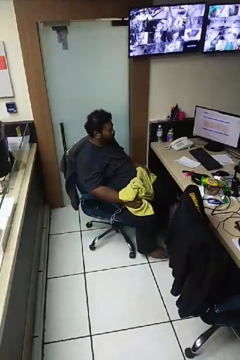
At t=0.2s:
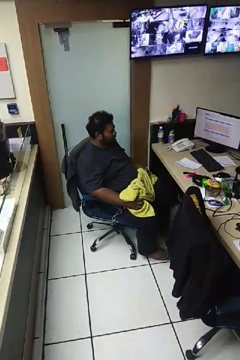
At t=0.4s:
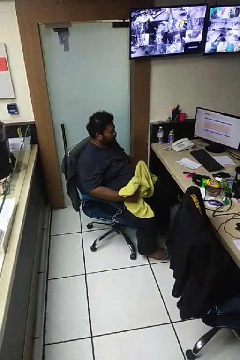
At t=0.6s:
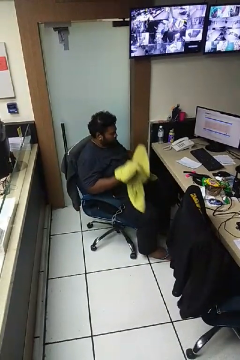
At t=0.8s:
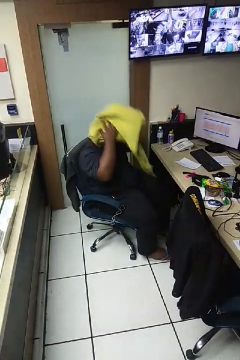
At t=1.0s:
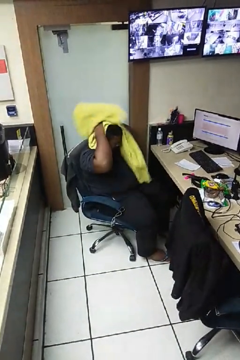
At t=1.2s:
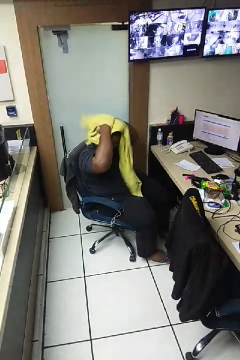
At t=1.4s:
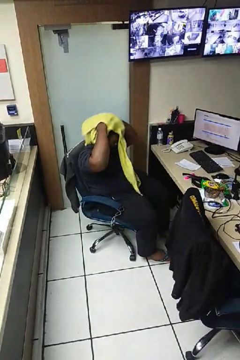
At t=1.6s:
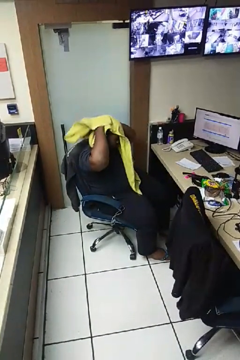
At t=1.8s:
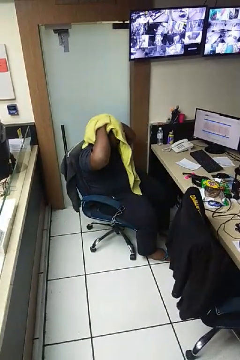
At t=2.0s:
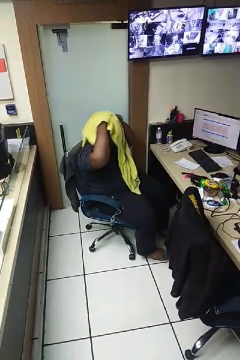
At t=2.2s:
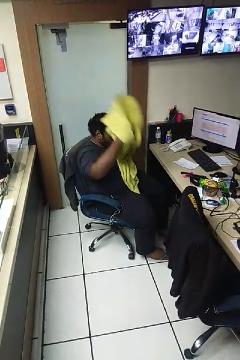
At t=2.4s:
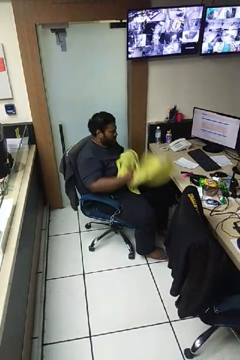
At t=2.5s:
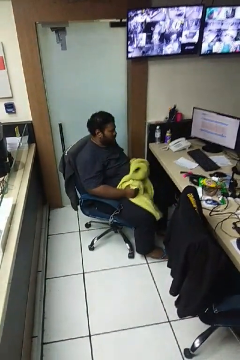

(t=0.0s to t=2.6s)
person dries hair with towel

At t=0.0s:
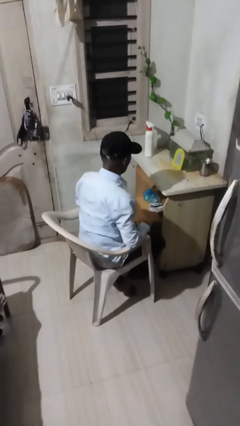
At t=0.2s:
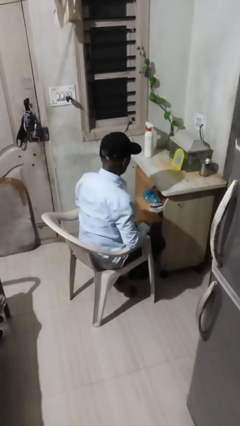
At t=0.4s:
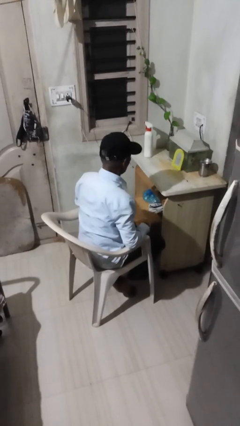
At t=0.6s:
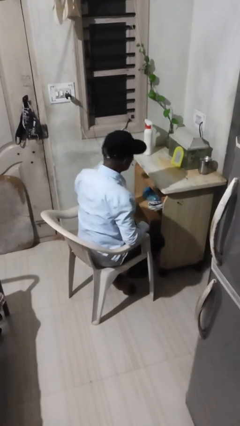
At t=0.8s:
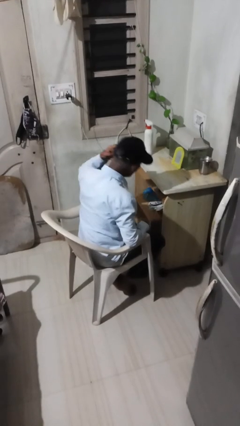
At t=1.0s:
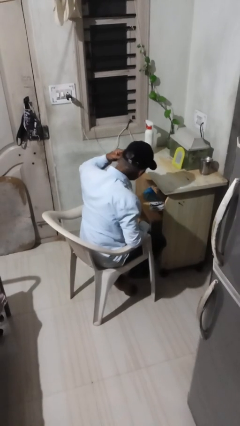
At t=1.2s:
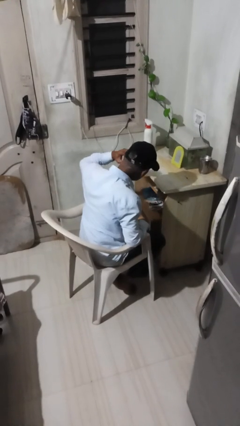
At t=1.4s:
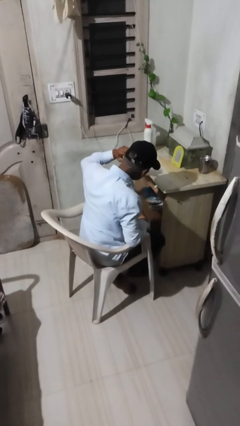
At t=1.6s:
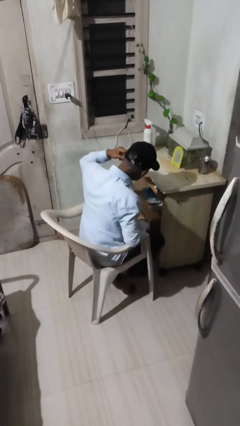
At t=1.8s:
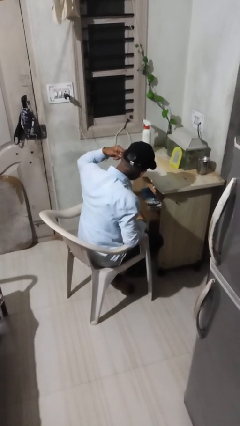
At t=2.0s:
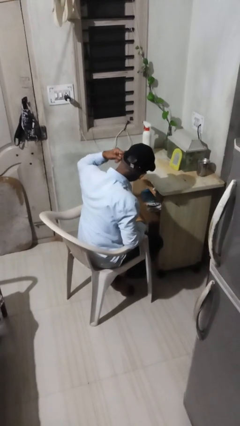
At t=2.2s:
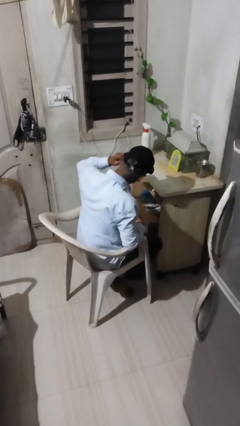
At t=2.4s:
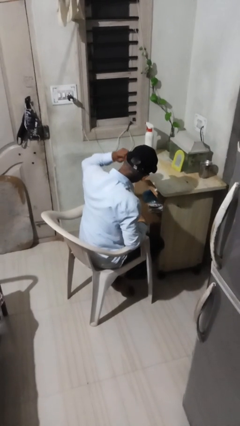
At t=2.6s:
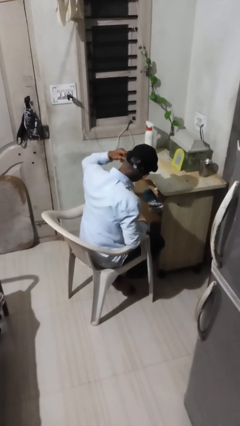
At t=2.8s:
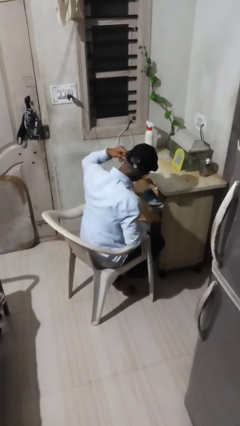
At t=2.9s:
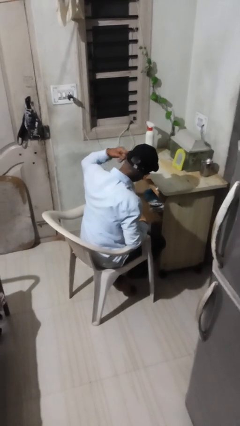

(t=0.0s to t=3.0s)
person puts fingers in ear

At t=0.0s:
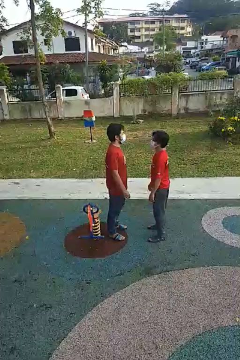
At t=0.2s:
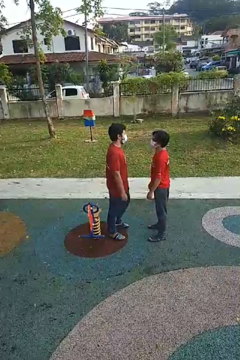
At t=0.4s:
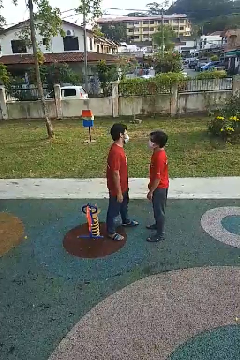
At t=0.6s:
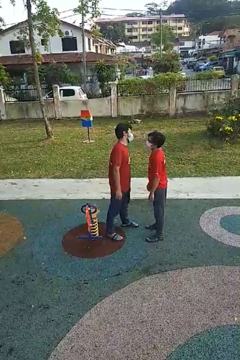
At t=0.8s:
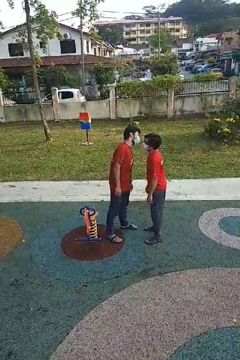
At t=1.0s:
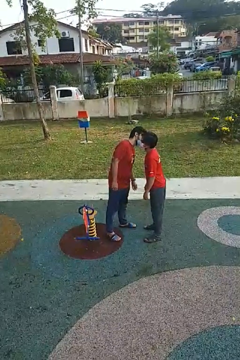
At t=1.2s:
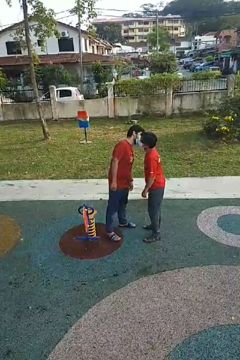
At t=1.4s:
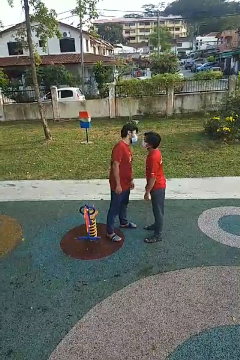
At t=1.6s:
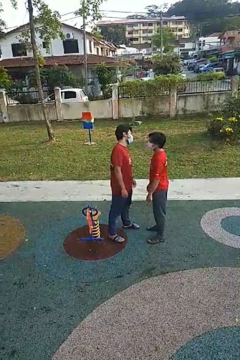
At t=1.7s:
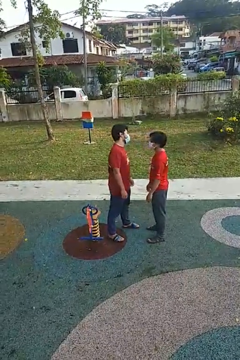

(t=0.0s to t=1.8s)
person kisses cheek of person

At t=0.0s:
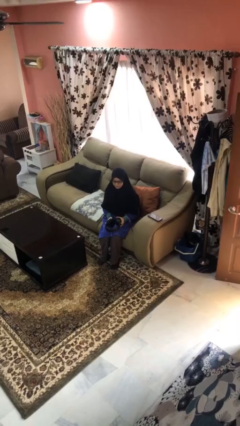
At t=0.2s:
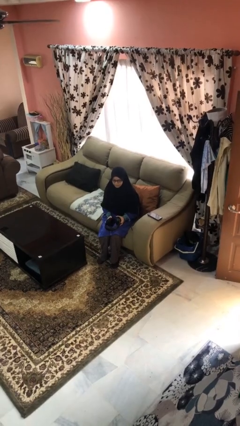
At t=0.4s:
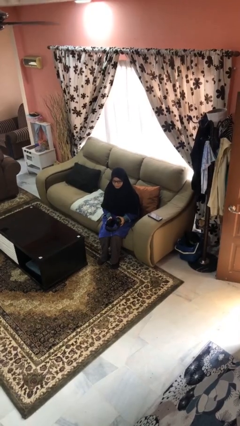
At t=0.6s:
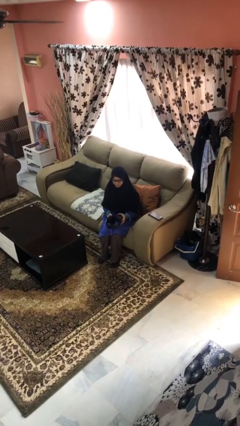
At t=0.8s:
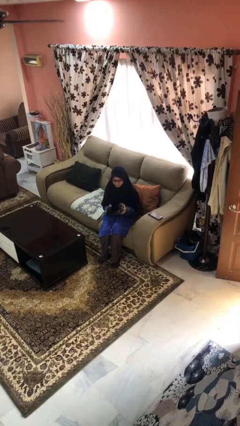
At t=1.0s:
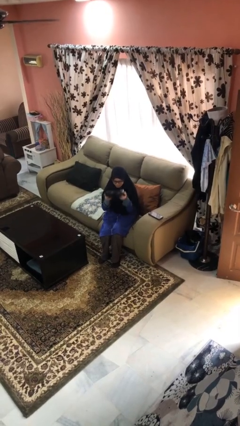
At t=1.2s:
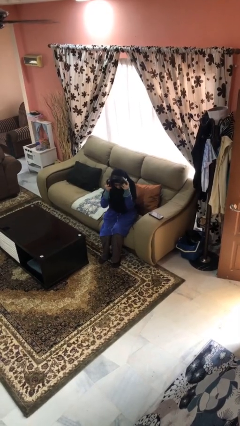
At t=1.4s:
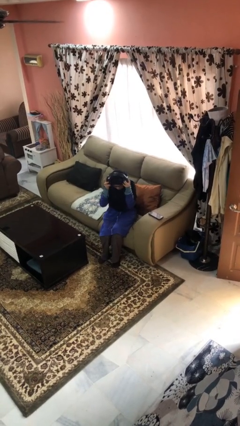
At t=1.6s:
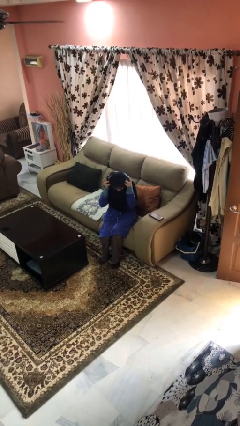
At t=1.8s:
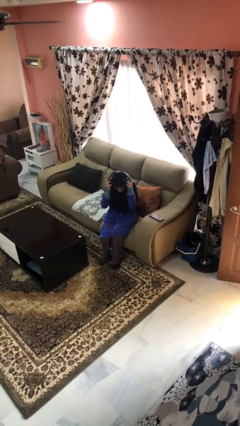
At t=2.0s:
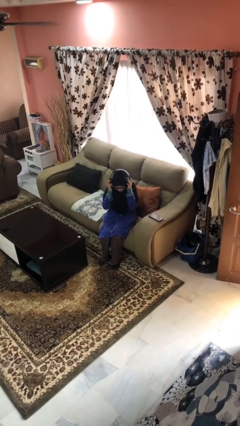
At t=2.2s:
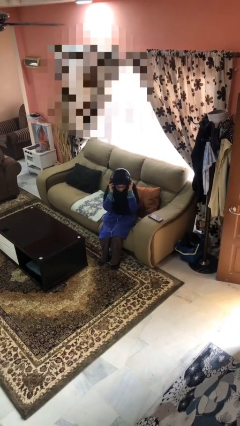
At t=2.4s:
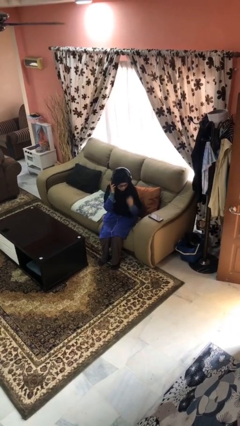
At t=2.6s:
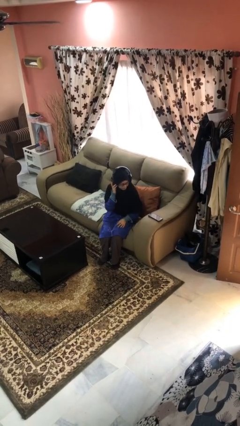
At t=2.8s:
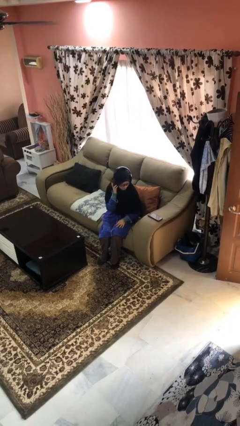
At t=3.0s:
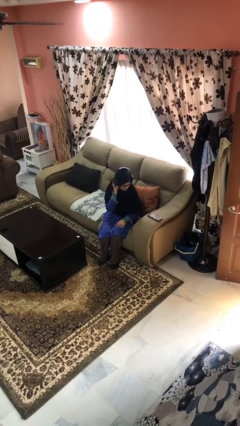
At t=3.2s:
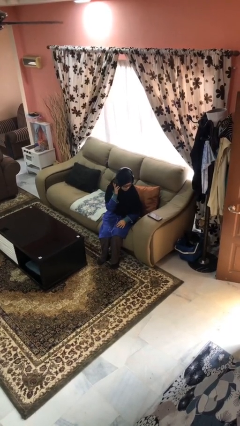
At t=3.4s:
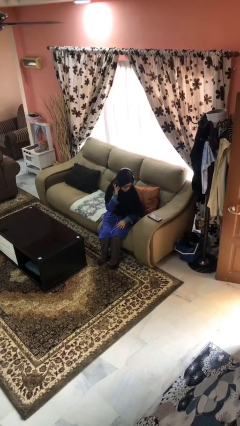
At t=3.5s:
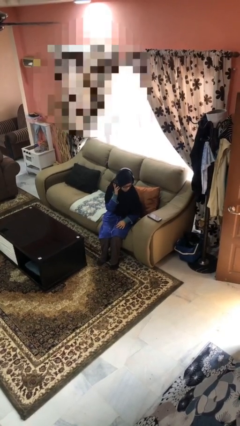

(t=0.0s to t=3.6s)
person puts on headphones

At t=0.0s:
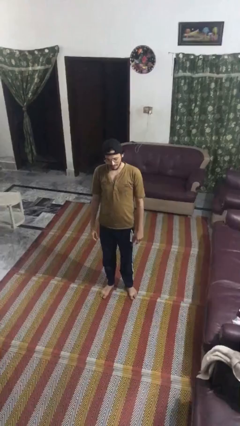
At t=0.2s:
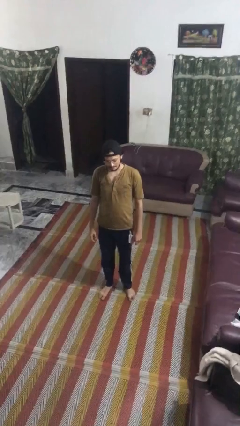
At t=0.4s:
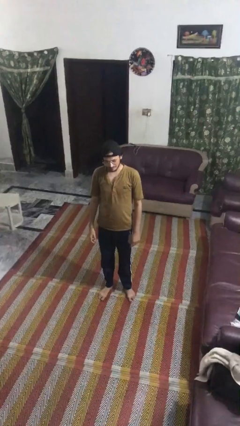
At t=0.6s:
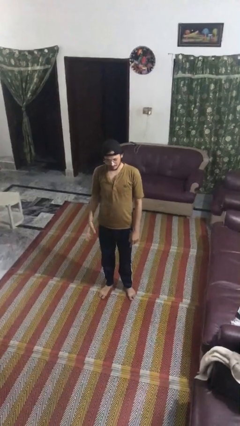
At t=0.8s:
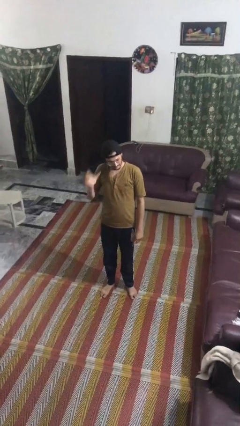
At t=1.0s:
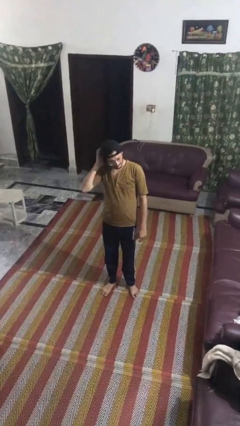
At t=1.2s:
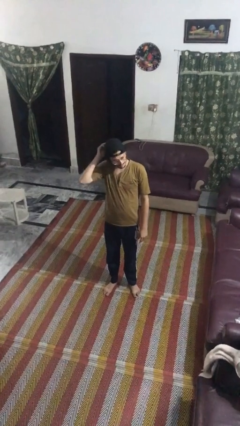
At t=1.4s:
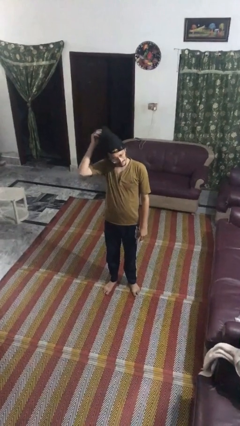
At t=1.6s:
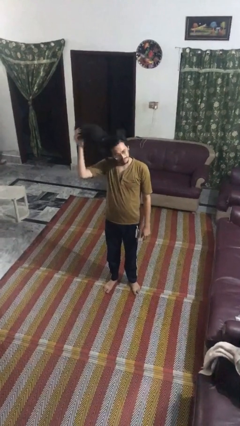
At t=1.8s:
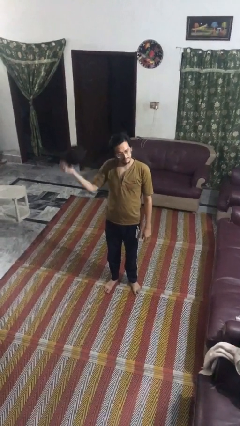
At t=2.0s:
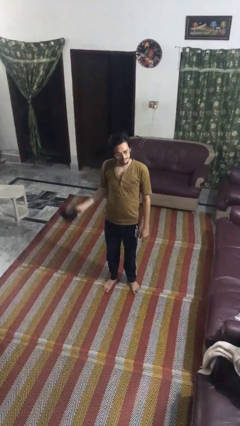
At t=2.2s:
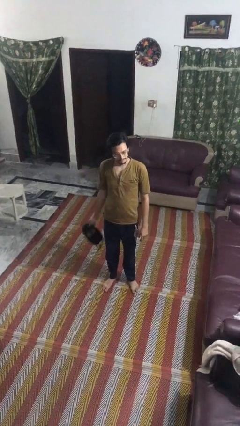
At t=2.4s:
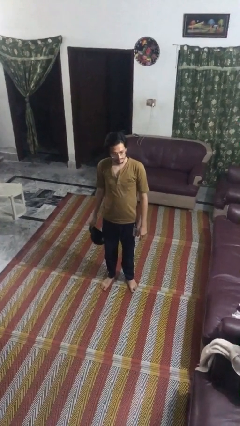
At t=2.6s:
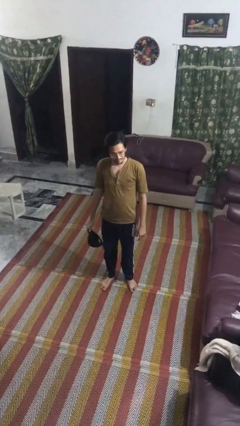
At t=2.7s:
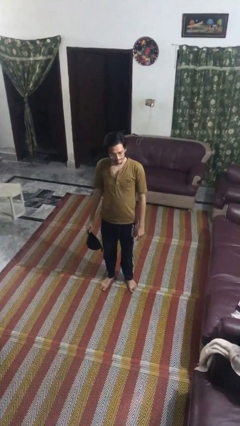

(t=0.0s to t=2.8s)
person takes off hat

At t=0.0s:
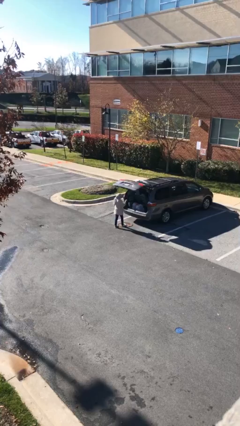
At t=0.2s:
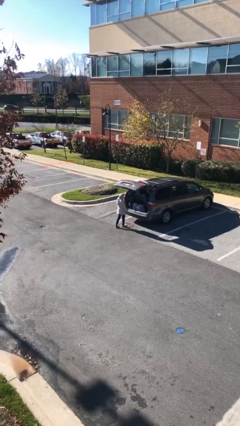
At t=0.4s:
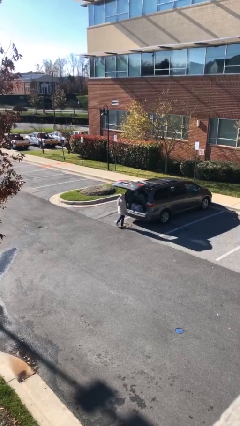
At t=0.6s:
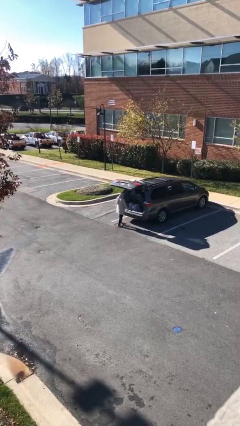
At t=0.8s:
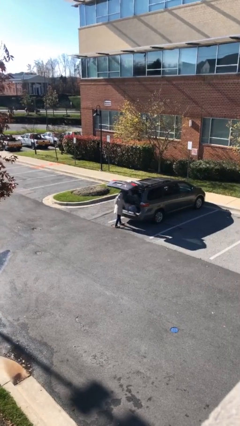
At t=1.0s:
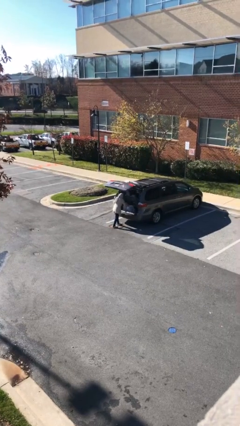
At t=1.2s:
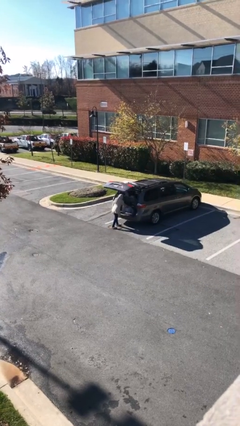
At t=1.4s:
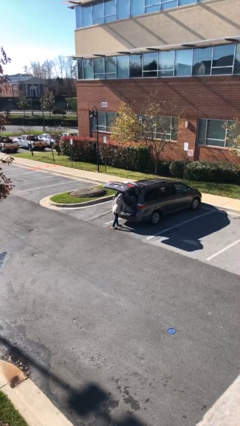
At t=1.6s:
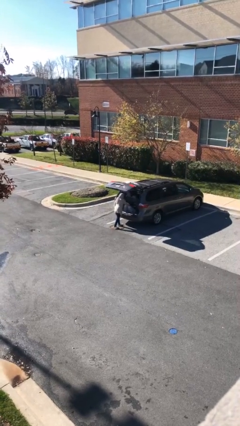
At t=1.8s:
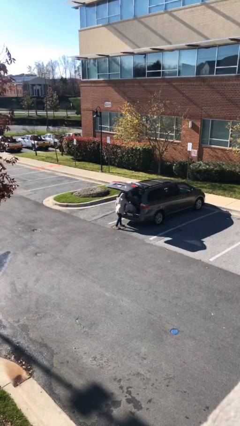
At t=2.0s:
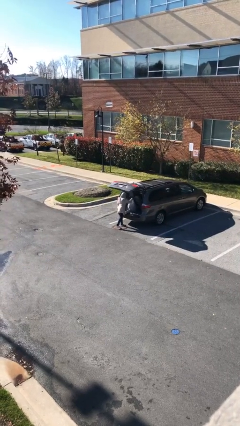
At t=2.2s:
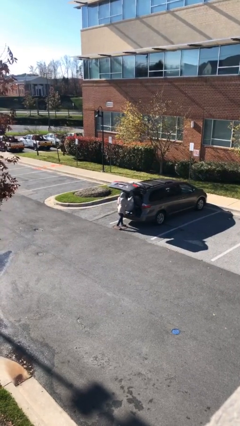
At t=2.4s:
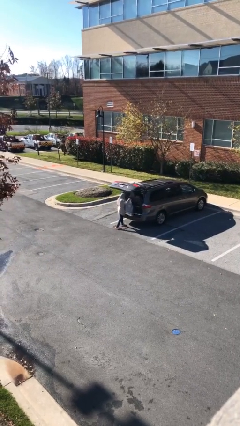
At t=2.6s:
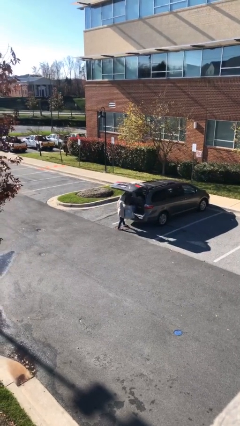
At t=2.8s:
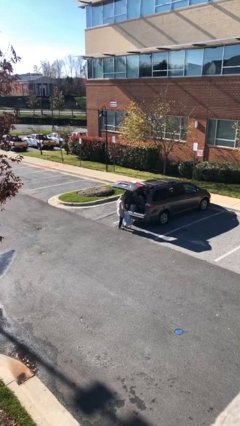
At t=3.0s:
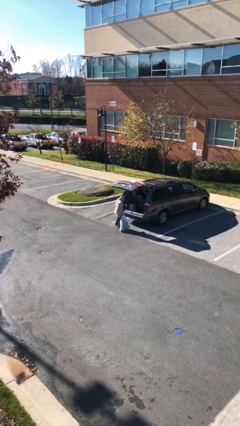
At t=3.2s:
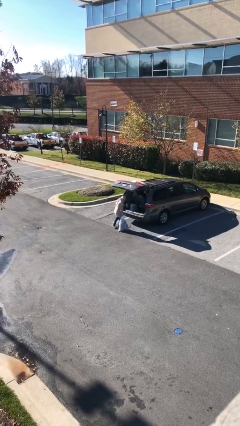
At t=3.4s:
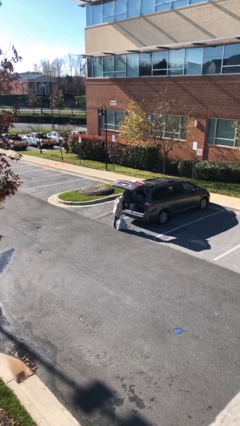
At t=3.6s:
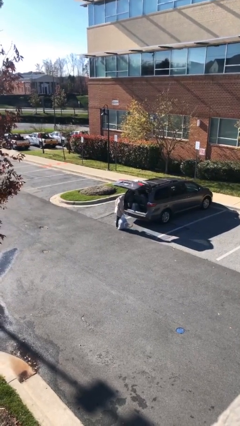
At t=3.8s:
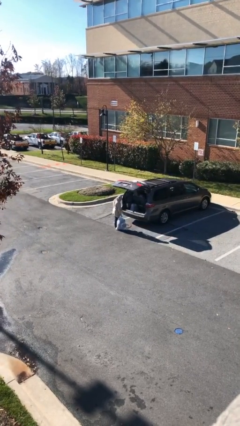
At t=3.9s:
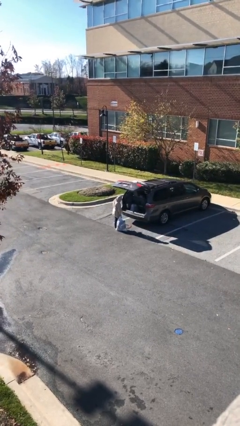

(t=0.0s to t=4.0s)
person unloads car
